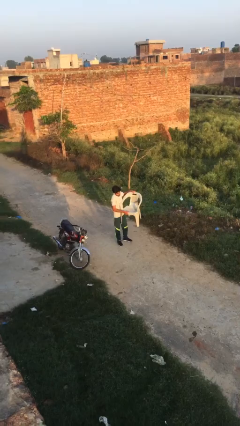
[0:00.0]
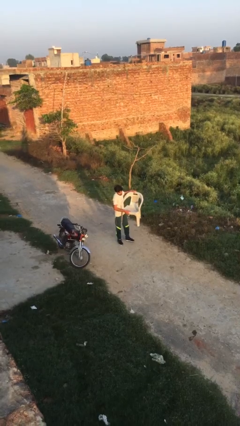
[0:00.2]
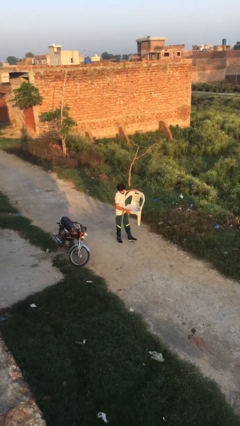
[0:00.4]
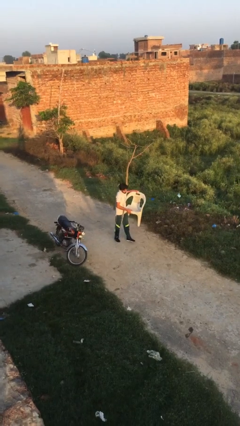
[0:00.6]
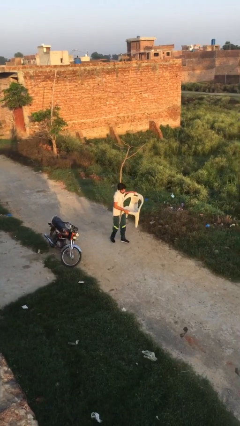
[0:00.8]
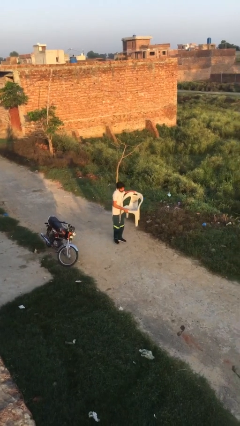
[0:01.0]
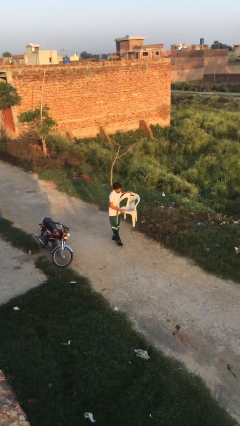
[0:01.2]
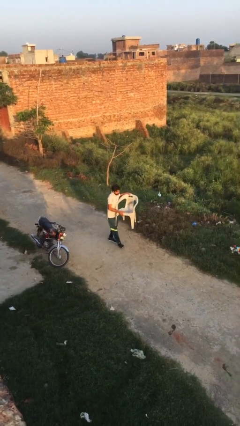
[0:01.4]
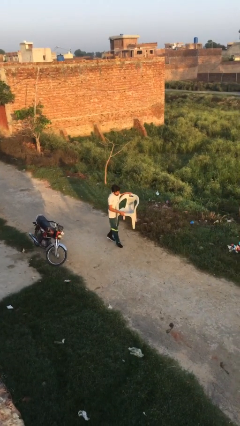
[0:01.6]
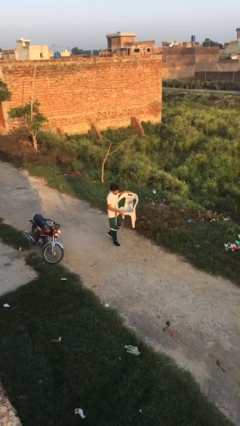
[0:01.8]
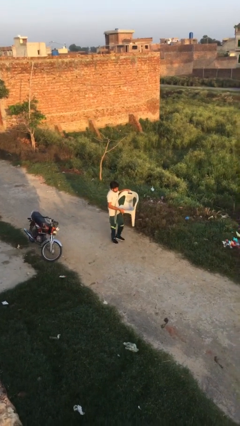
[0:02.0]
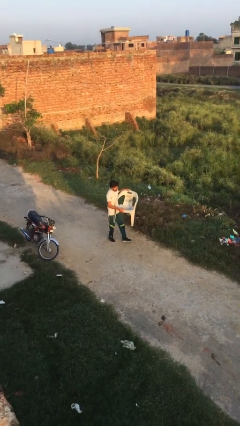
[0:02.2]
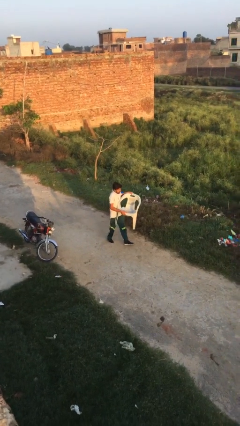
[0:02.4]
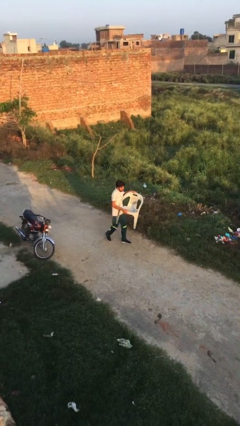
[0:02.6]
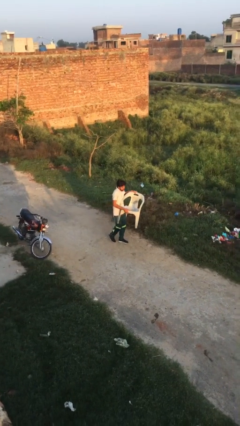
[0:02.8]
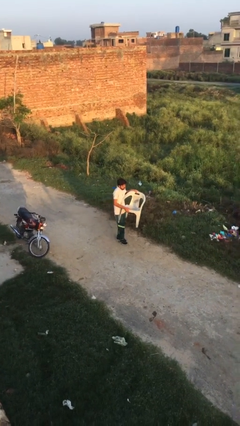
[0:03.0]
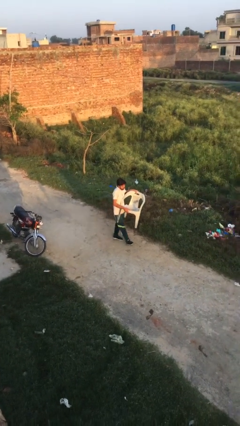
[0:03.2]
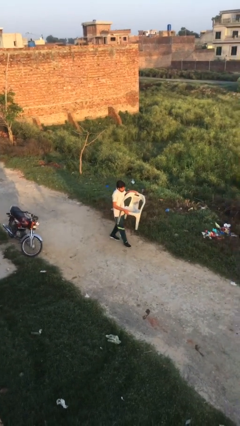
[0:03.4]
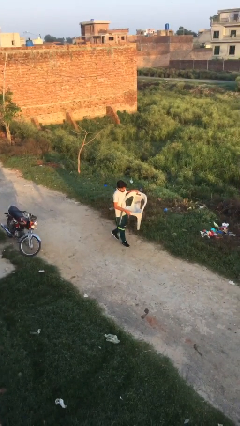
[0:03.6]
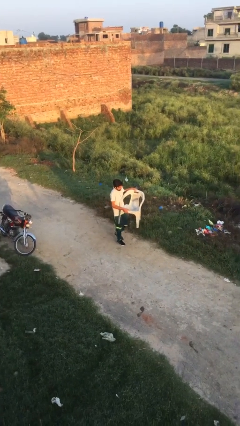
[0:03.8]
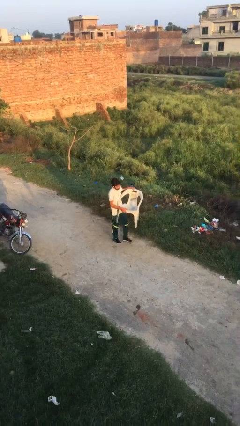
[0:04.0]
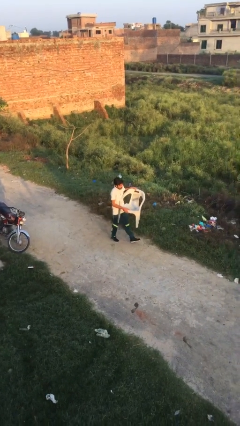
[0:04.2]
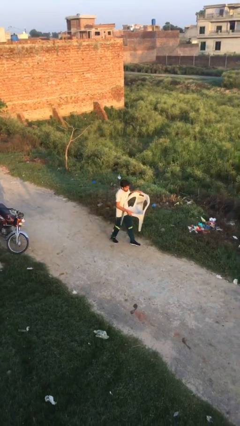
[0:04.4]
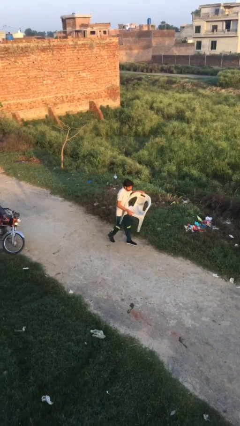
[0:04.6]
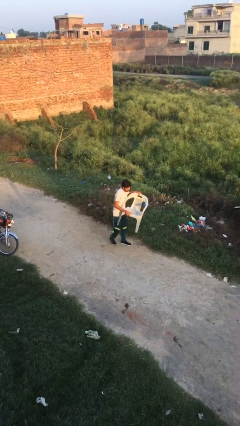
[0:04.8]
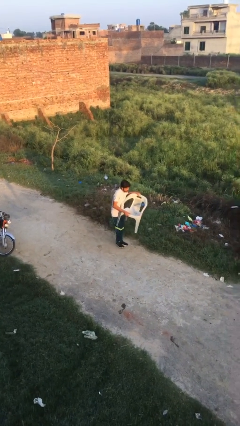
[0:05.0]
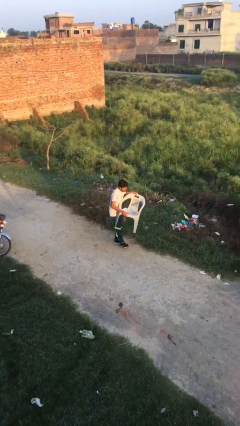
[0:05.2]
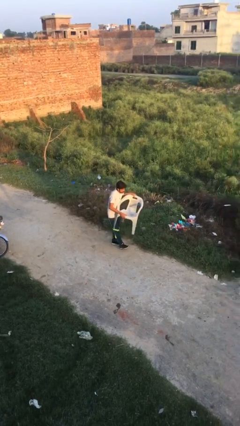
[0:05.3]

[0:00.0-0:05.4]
person carries heavy object

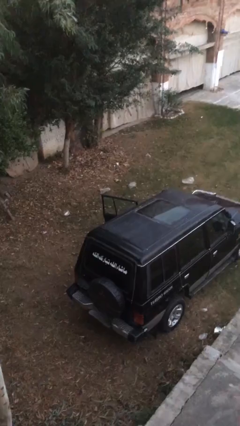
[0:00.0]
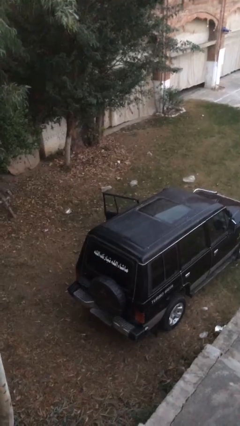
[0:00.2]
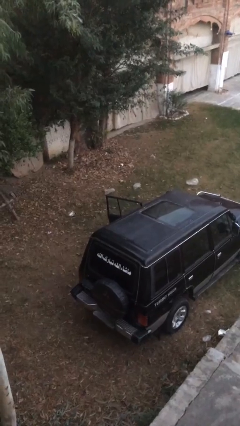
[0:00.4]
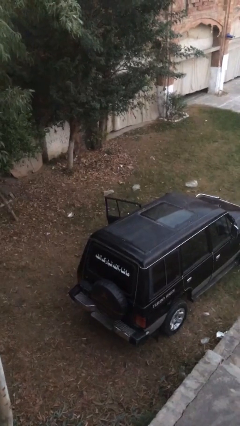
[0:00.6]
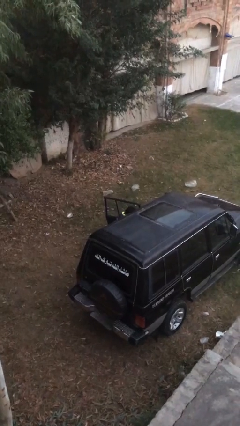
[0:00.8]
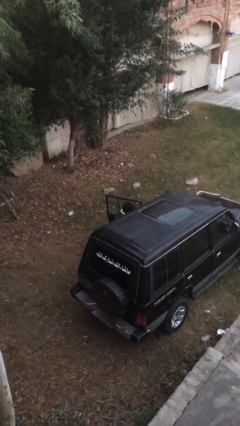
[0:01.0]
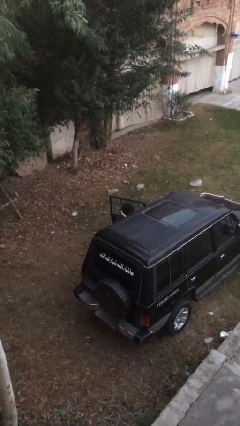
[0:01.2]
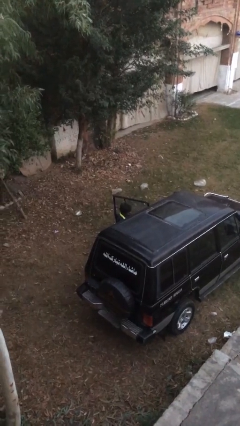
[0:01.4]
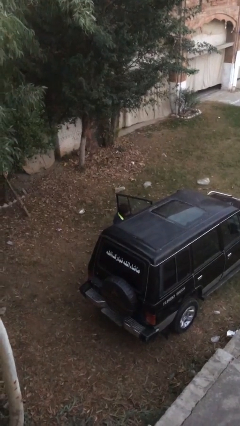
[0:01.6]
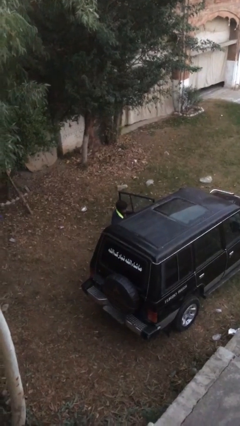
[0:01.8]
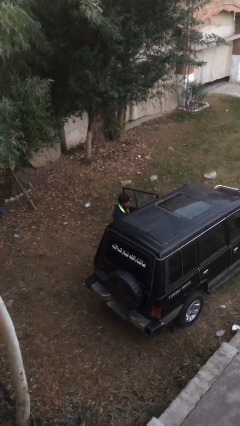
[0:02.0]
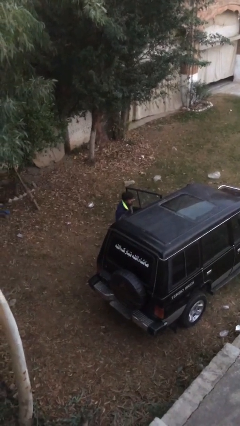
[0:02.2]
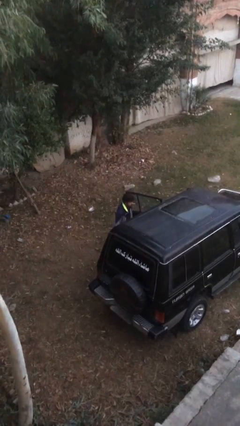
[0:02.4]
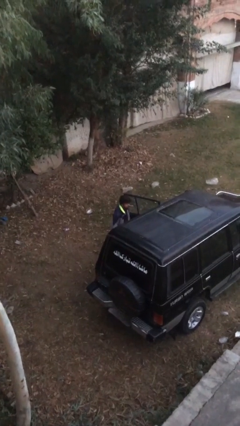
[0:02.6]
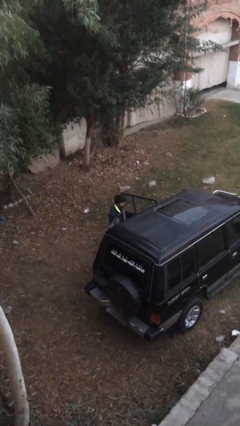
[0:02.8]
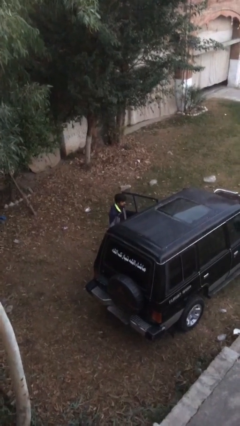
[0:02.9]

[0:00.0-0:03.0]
person exits car

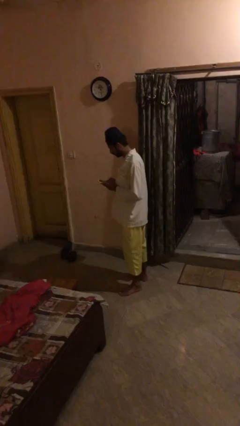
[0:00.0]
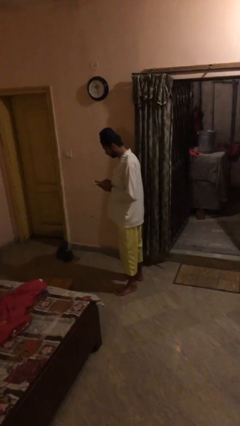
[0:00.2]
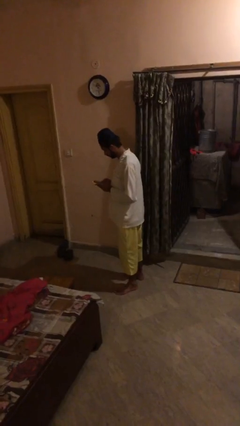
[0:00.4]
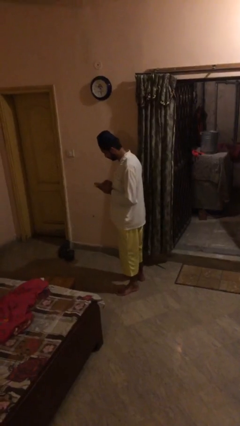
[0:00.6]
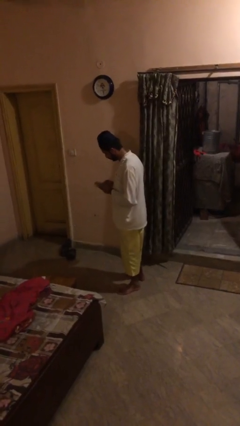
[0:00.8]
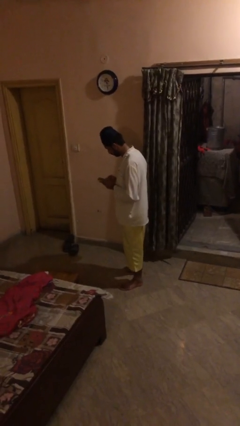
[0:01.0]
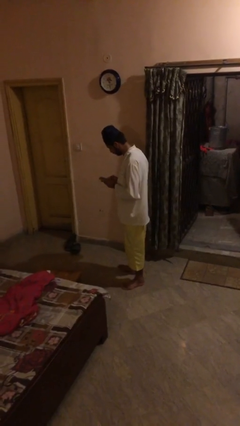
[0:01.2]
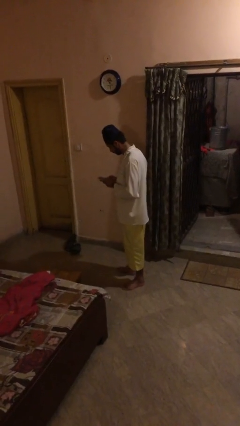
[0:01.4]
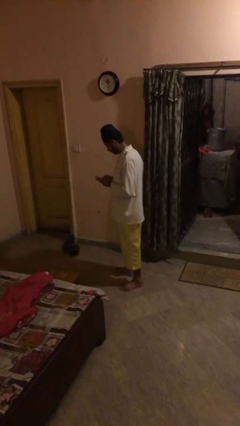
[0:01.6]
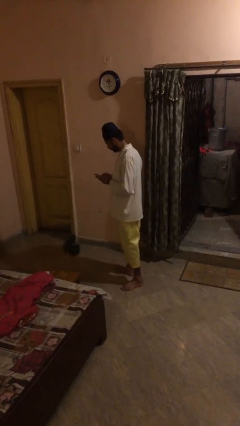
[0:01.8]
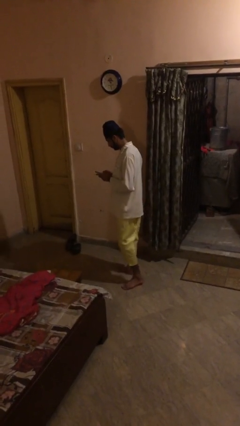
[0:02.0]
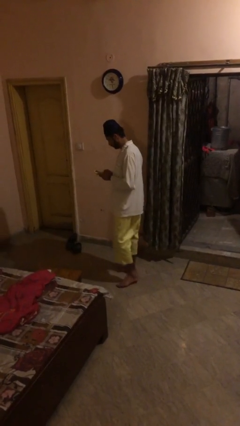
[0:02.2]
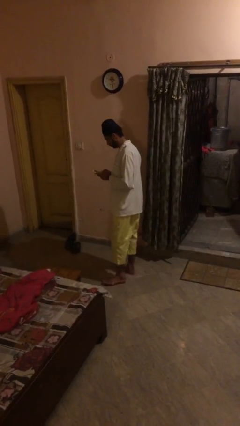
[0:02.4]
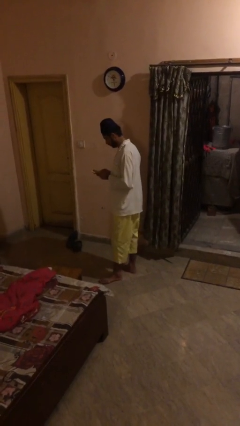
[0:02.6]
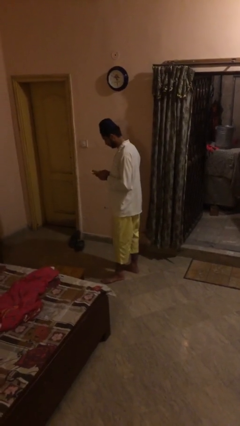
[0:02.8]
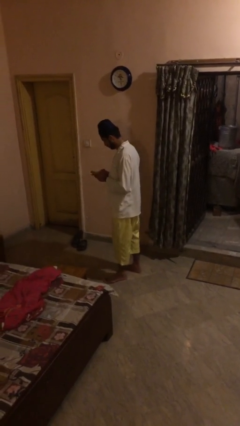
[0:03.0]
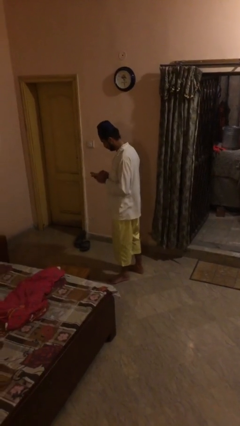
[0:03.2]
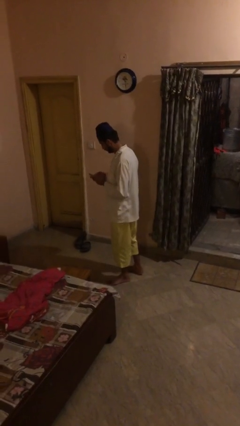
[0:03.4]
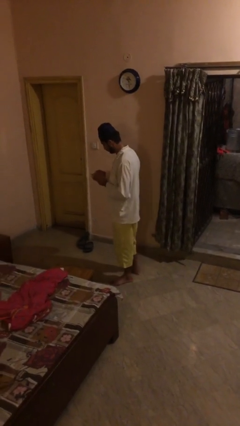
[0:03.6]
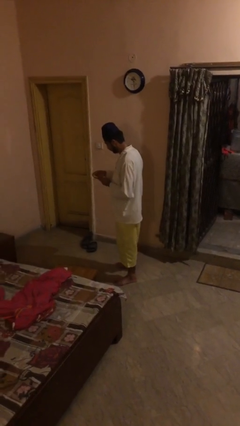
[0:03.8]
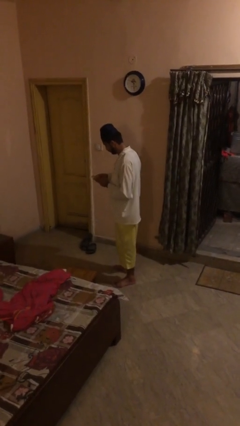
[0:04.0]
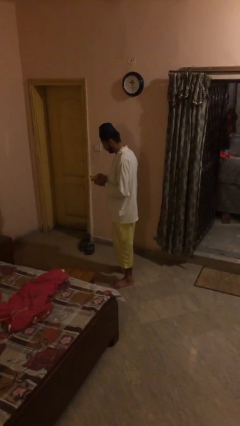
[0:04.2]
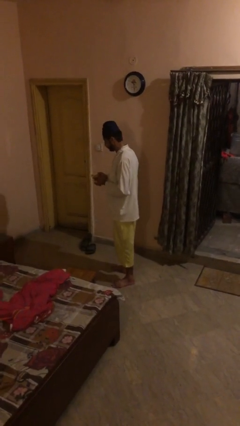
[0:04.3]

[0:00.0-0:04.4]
person texts on phone

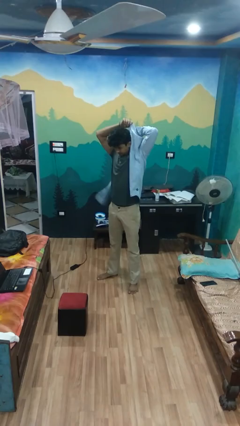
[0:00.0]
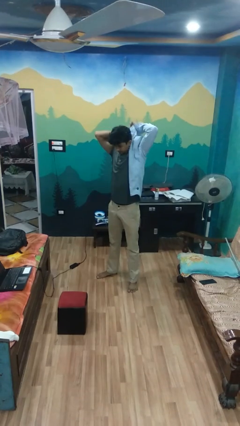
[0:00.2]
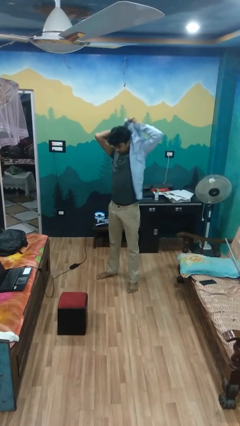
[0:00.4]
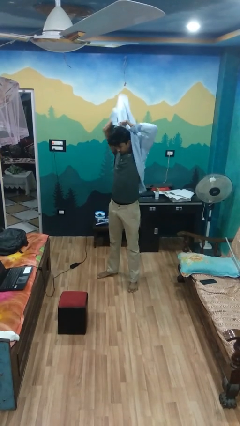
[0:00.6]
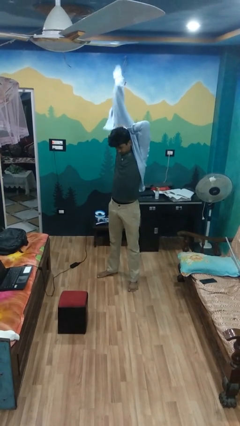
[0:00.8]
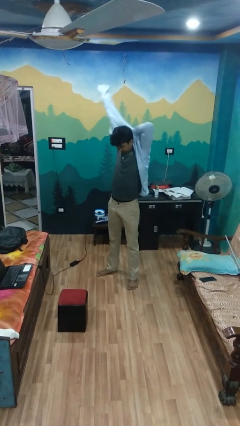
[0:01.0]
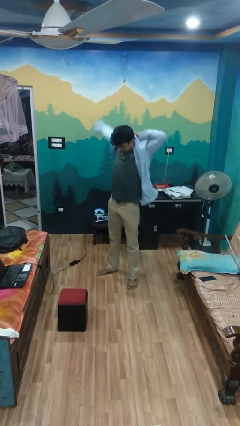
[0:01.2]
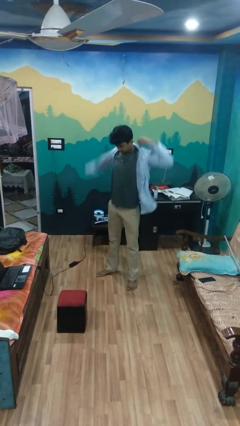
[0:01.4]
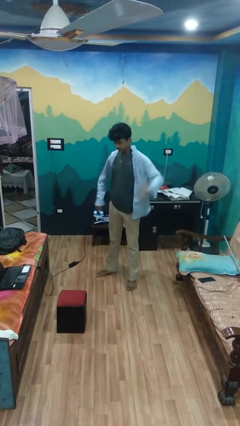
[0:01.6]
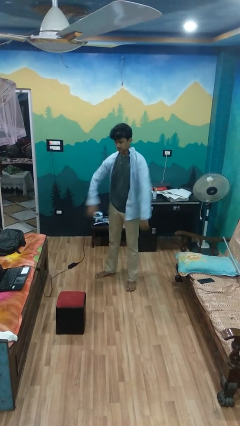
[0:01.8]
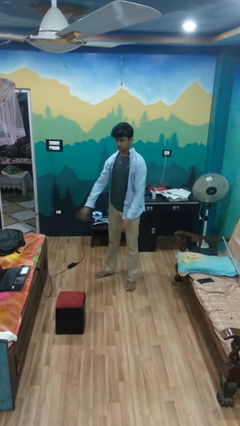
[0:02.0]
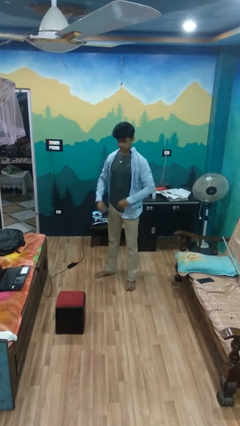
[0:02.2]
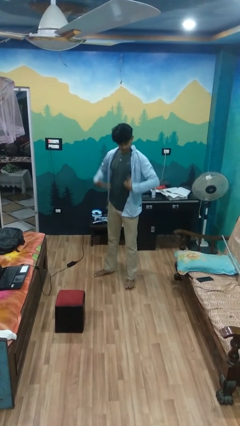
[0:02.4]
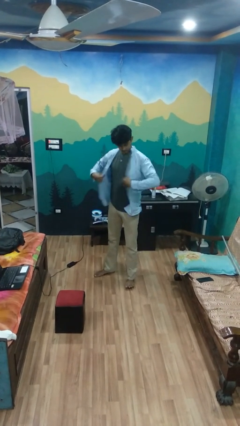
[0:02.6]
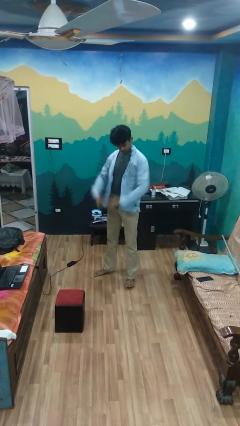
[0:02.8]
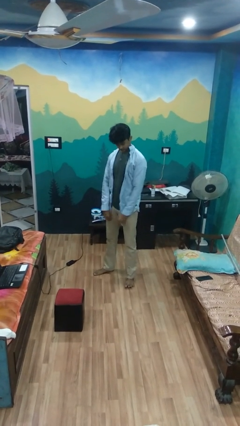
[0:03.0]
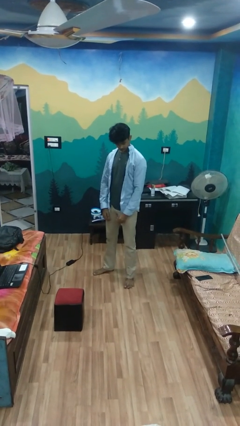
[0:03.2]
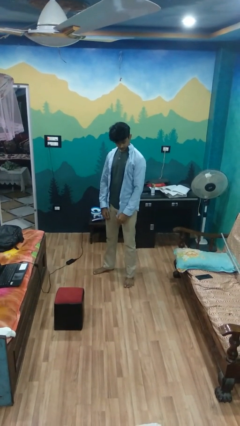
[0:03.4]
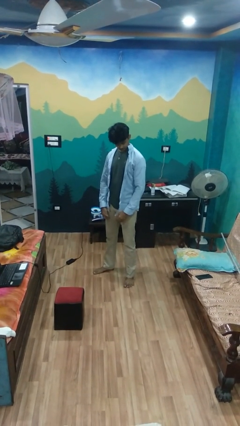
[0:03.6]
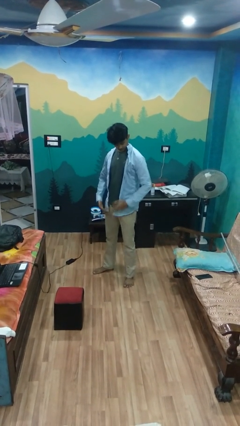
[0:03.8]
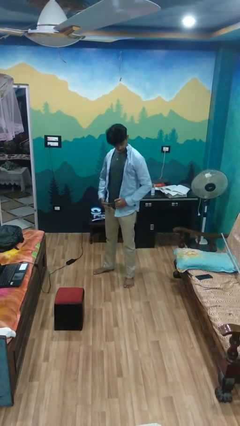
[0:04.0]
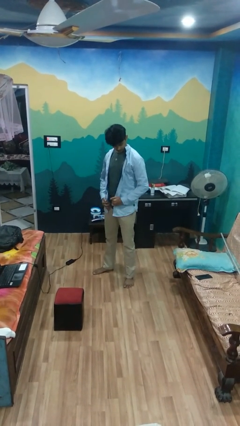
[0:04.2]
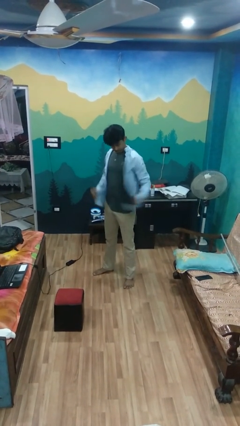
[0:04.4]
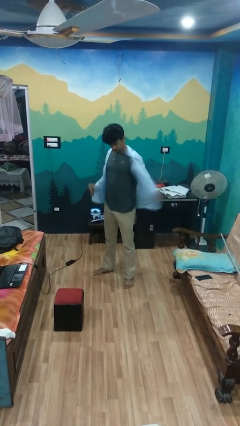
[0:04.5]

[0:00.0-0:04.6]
person puts on shirt
